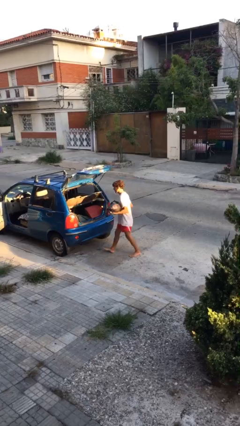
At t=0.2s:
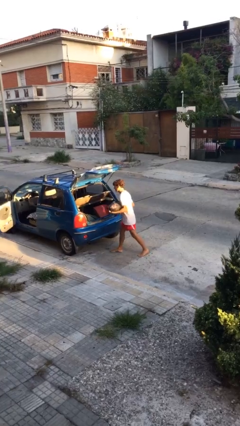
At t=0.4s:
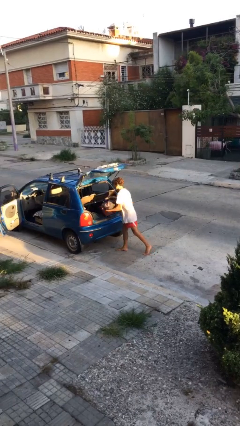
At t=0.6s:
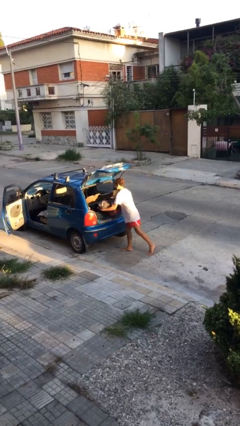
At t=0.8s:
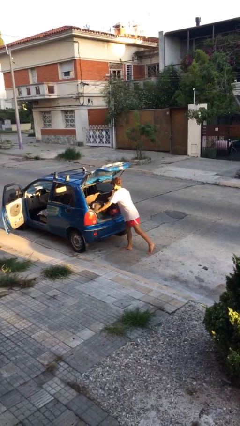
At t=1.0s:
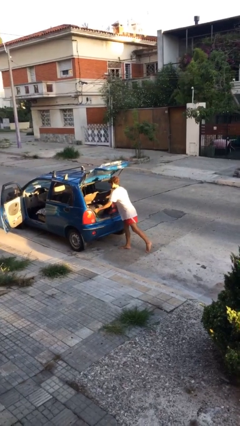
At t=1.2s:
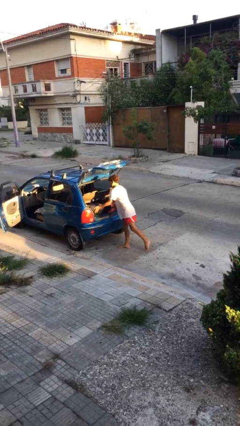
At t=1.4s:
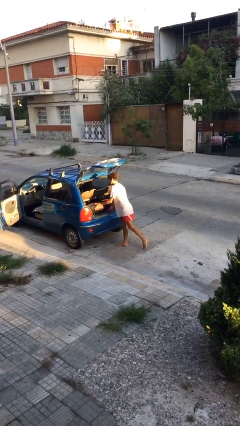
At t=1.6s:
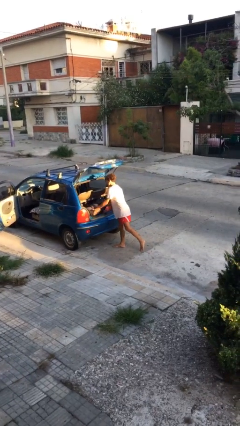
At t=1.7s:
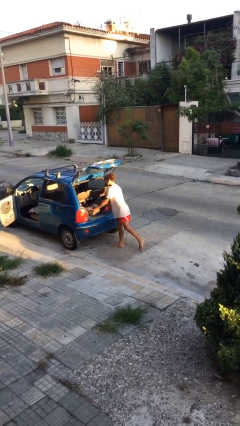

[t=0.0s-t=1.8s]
person loads car

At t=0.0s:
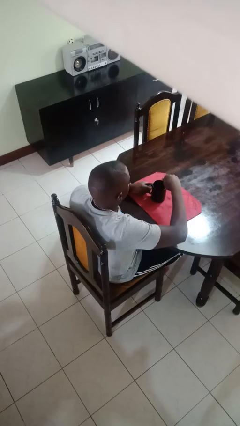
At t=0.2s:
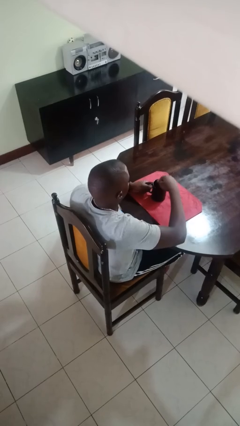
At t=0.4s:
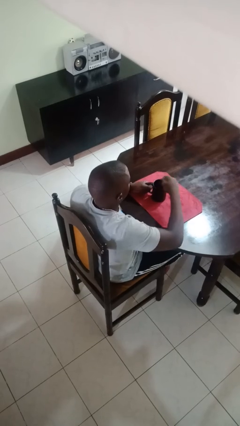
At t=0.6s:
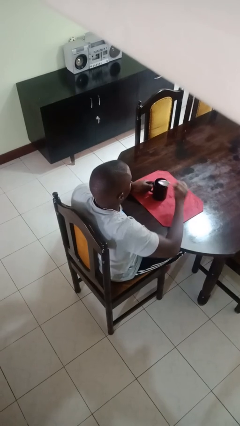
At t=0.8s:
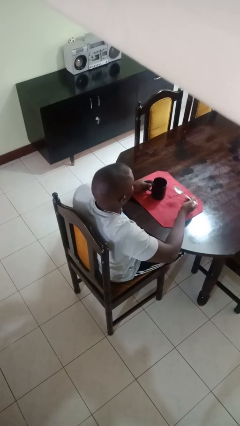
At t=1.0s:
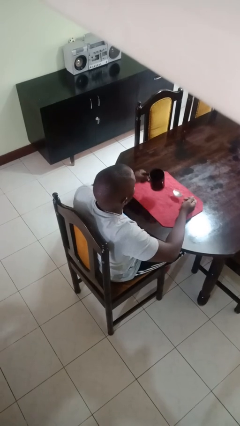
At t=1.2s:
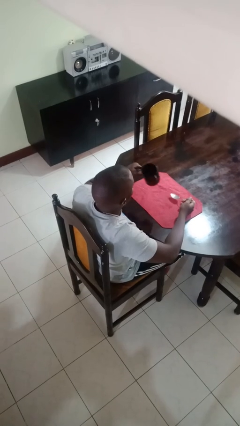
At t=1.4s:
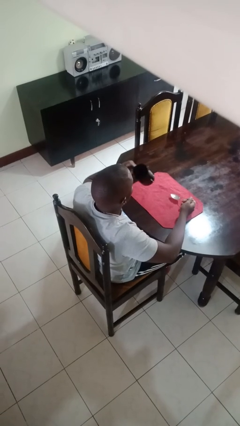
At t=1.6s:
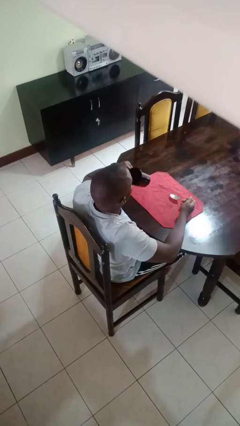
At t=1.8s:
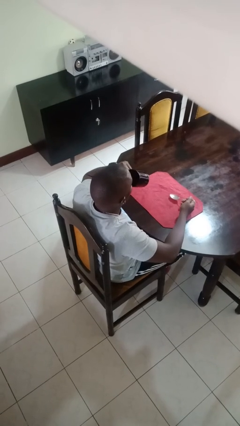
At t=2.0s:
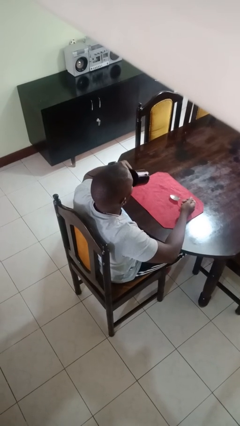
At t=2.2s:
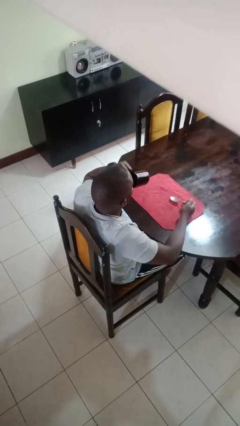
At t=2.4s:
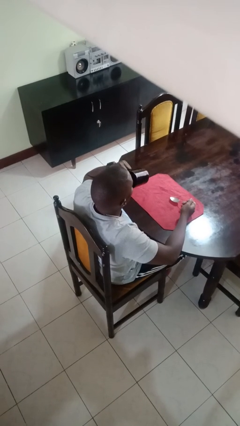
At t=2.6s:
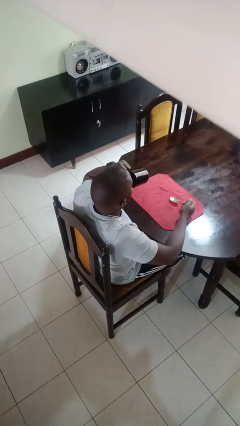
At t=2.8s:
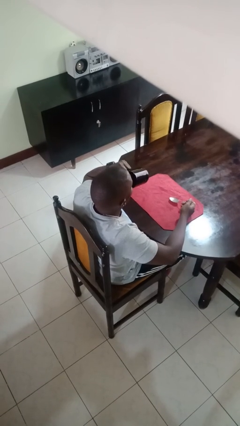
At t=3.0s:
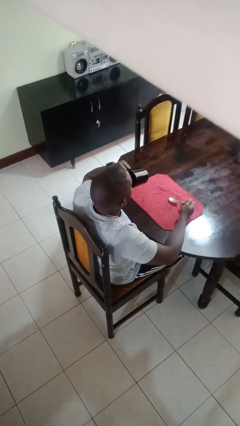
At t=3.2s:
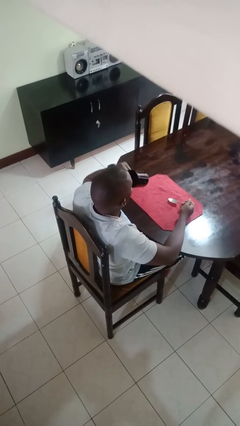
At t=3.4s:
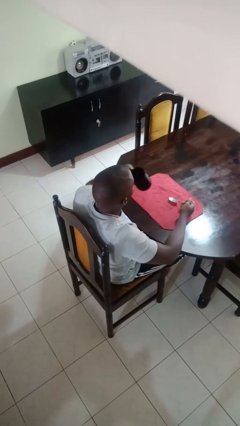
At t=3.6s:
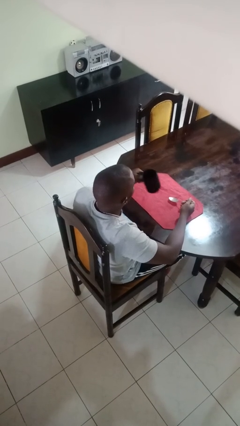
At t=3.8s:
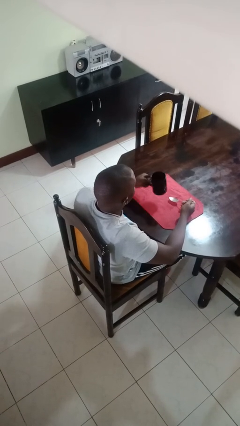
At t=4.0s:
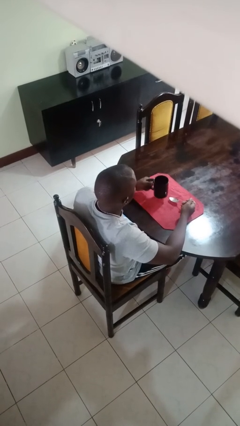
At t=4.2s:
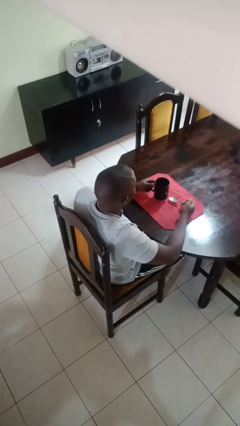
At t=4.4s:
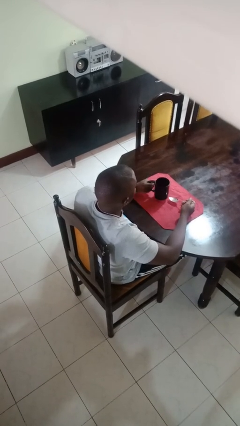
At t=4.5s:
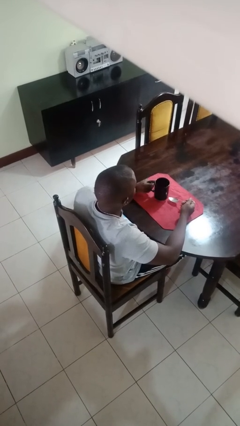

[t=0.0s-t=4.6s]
person drinks from mug

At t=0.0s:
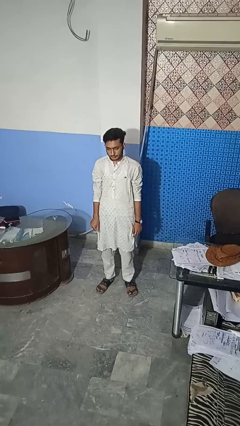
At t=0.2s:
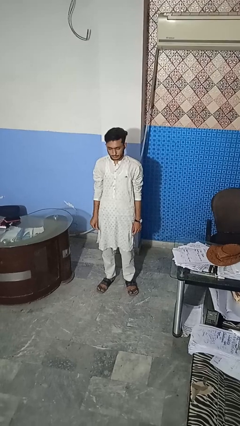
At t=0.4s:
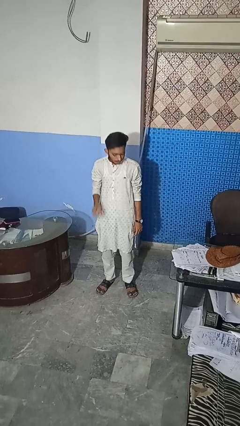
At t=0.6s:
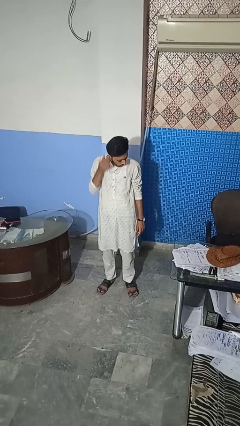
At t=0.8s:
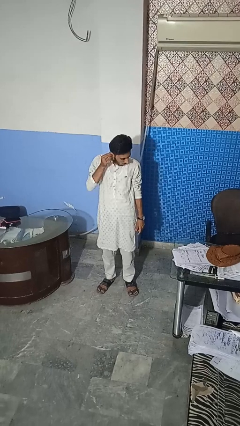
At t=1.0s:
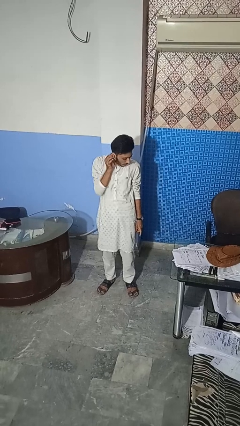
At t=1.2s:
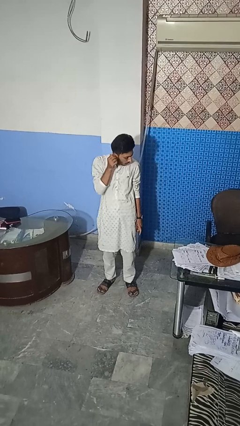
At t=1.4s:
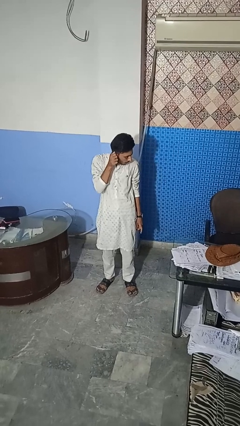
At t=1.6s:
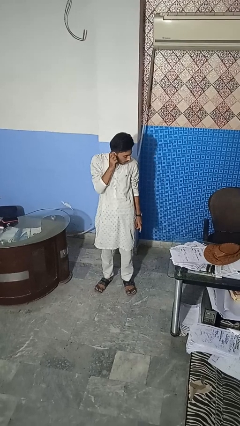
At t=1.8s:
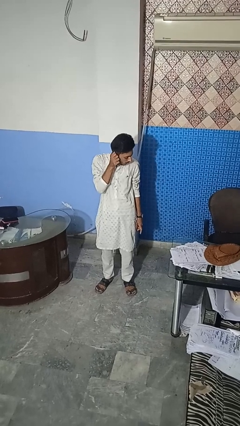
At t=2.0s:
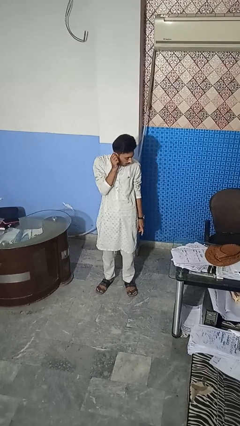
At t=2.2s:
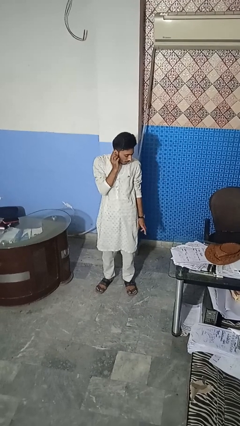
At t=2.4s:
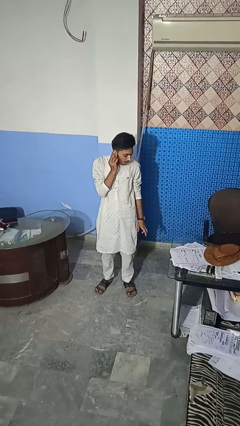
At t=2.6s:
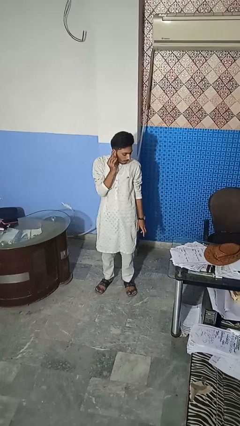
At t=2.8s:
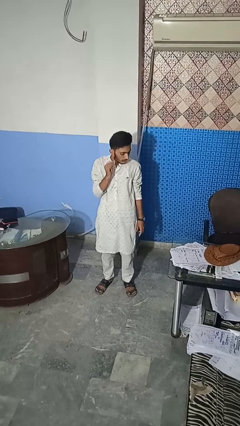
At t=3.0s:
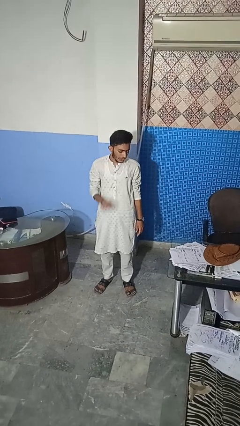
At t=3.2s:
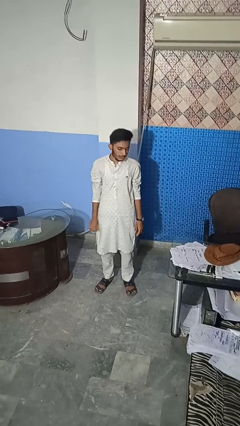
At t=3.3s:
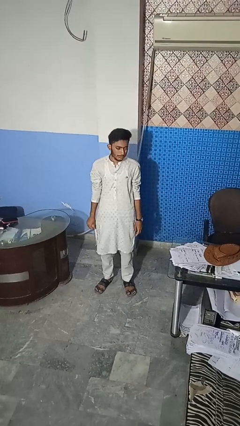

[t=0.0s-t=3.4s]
person touches earlobe

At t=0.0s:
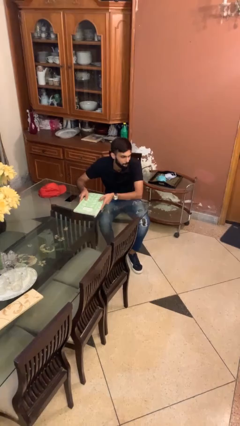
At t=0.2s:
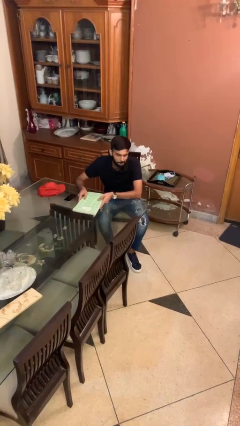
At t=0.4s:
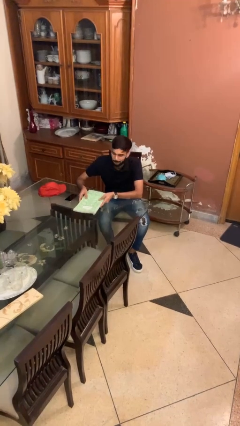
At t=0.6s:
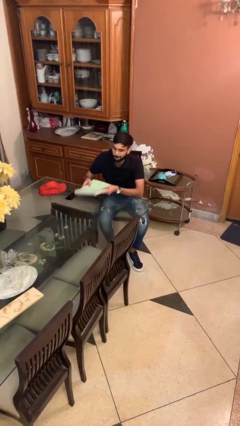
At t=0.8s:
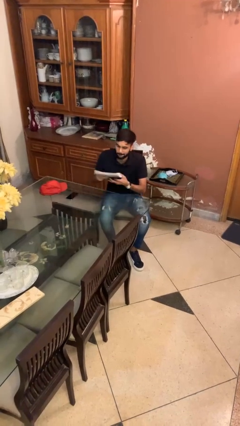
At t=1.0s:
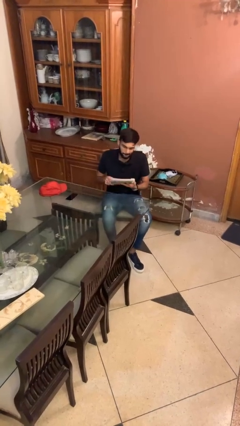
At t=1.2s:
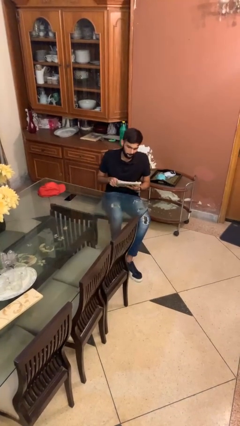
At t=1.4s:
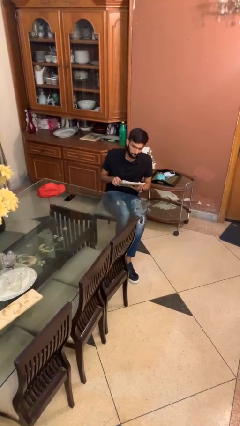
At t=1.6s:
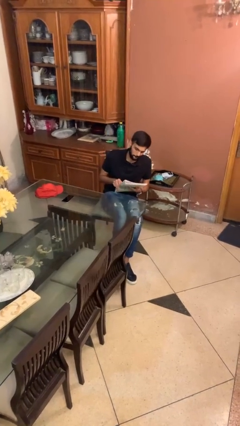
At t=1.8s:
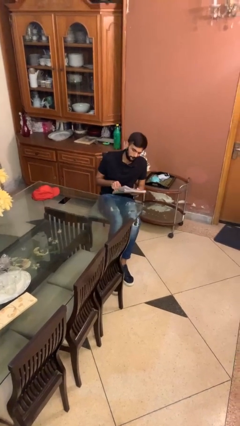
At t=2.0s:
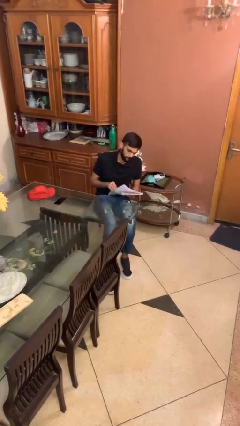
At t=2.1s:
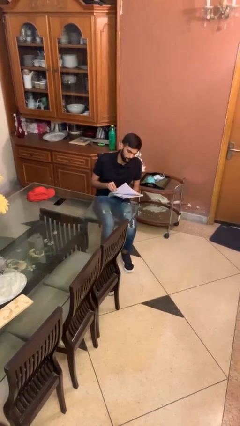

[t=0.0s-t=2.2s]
person picks up object from table

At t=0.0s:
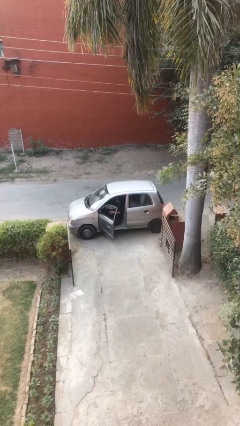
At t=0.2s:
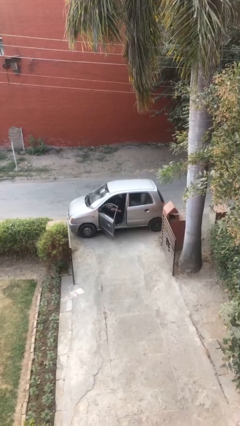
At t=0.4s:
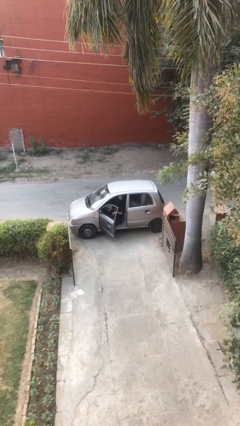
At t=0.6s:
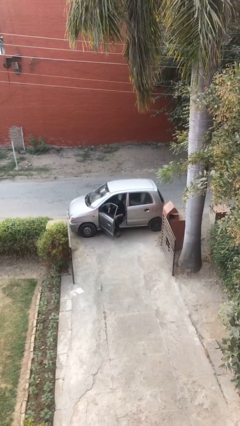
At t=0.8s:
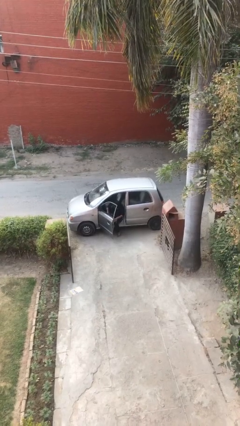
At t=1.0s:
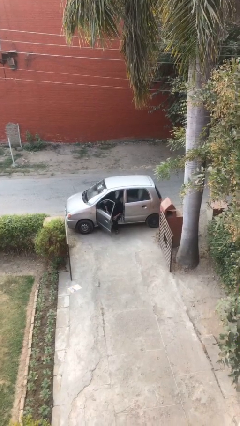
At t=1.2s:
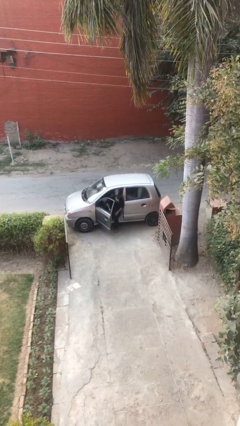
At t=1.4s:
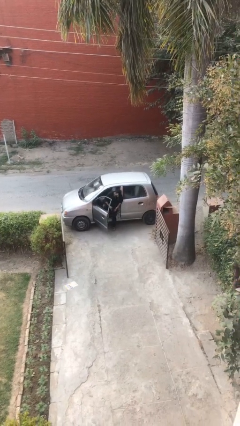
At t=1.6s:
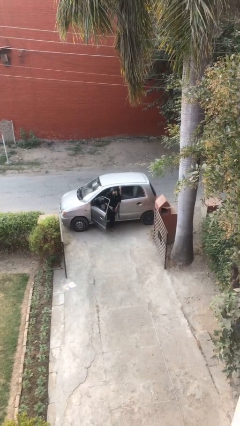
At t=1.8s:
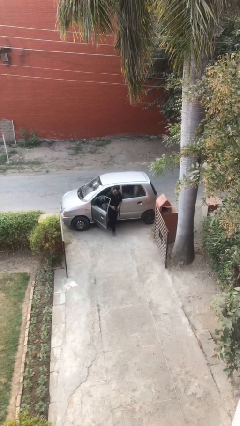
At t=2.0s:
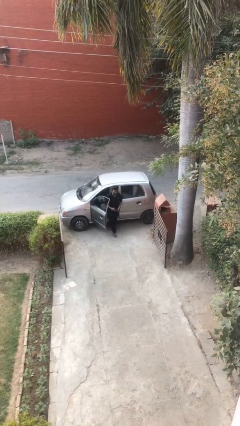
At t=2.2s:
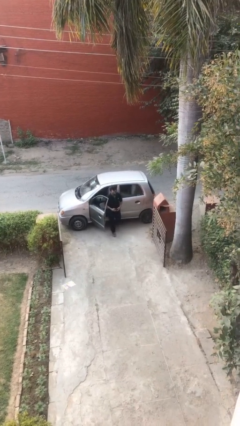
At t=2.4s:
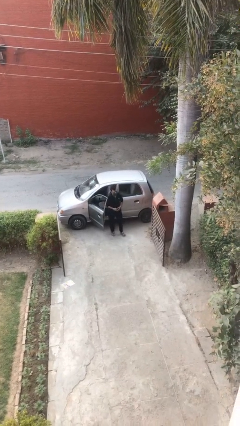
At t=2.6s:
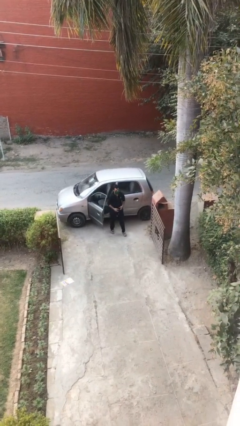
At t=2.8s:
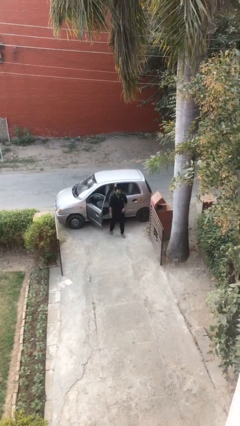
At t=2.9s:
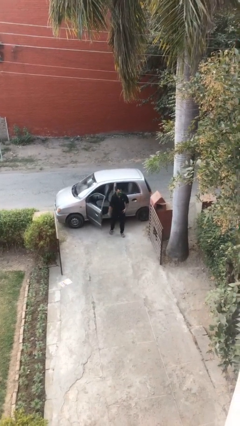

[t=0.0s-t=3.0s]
person exits car

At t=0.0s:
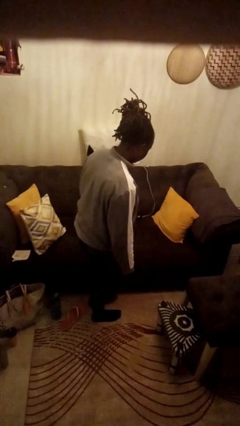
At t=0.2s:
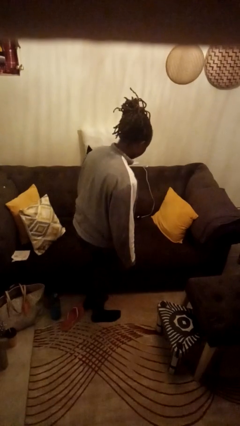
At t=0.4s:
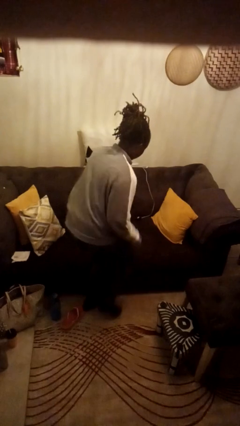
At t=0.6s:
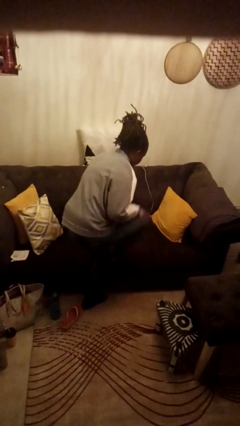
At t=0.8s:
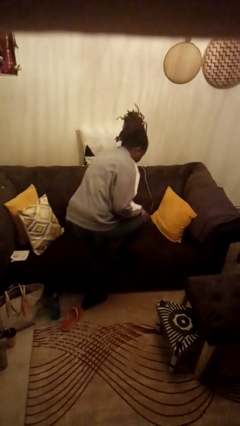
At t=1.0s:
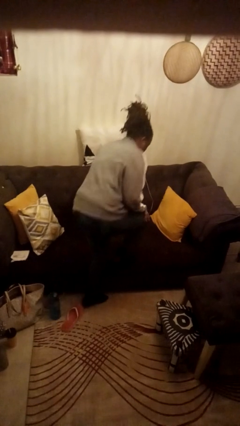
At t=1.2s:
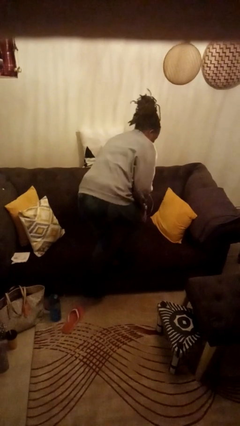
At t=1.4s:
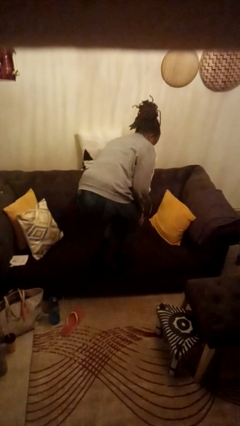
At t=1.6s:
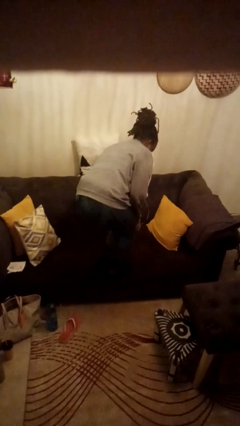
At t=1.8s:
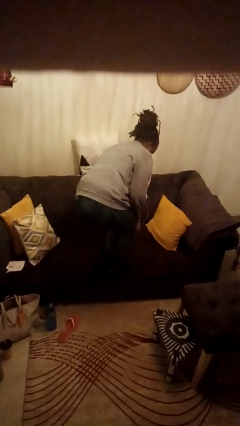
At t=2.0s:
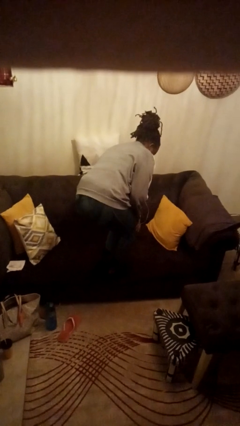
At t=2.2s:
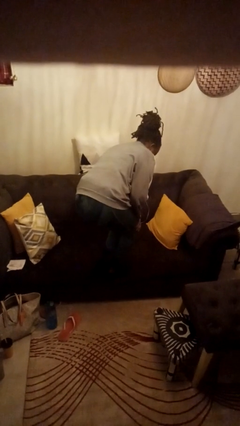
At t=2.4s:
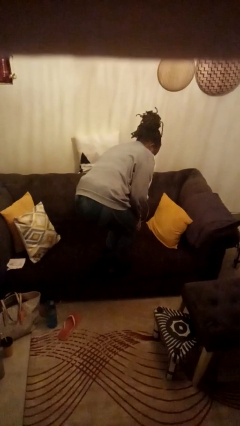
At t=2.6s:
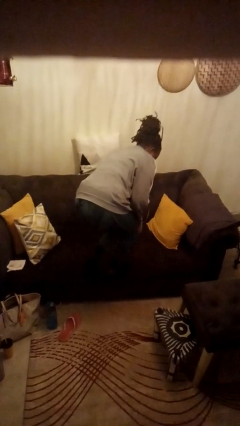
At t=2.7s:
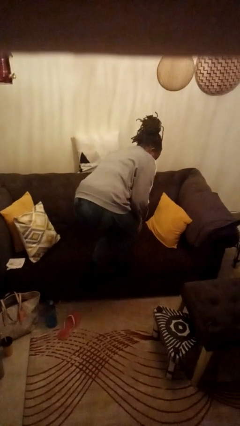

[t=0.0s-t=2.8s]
person climbs on chair

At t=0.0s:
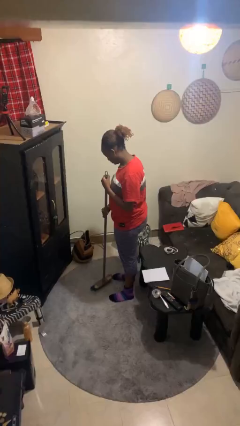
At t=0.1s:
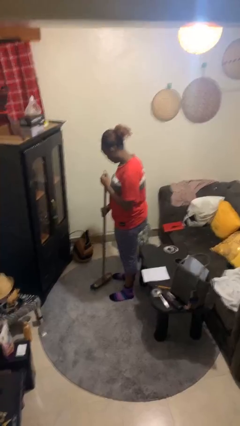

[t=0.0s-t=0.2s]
person sweeps floor
